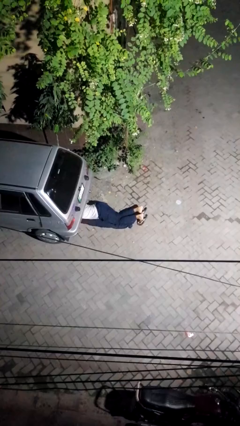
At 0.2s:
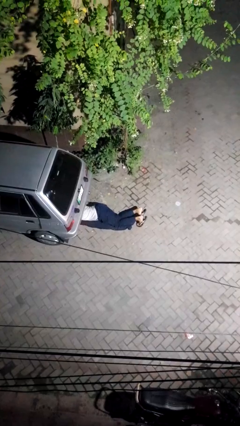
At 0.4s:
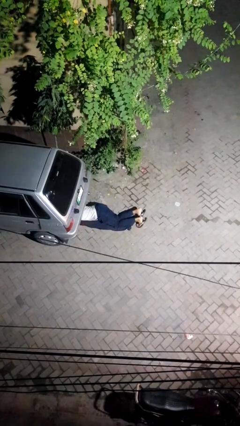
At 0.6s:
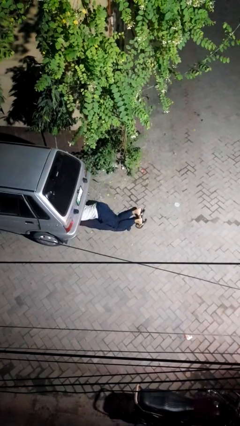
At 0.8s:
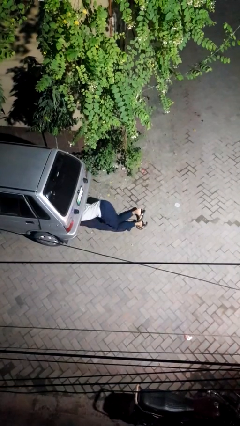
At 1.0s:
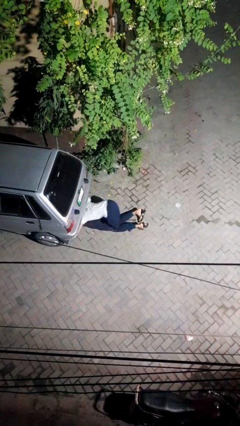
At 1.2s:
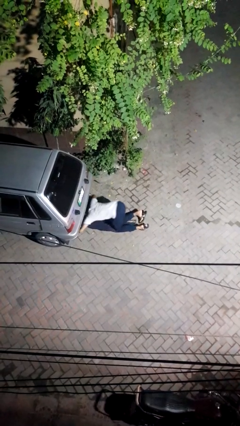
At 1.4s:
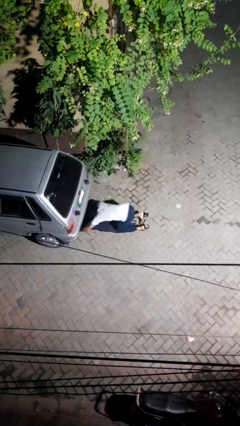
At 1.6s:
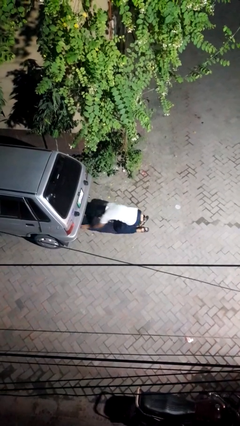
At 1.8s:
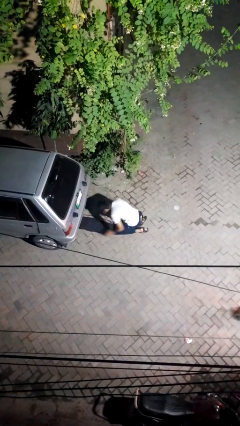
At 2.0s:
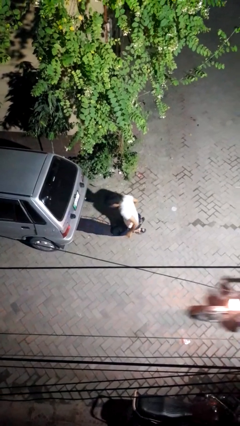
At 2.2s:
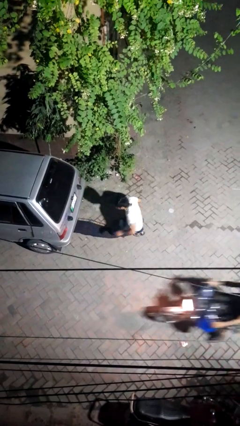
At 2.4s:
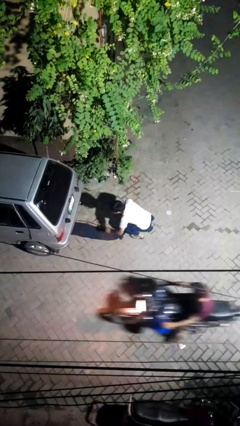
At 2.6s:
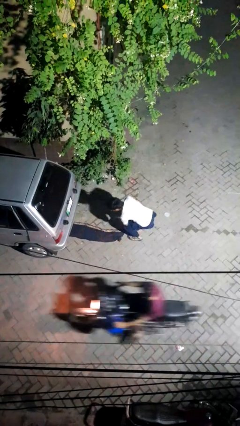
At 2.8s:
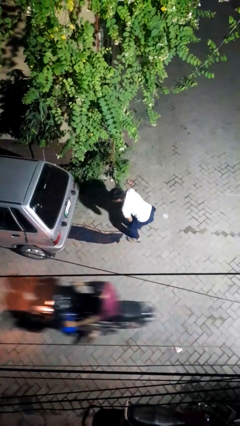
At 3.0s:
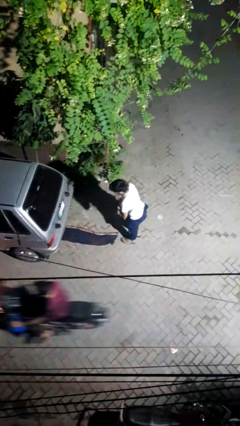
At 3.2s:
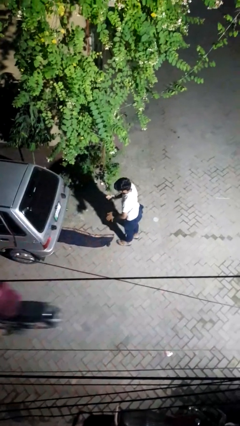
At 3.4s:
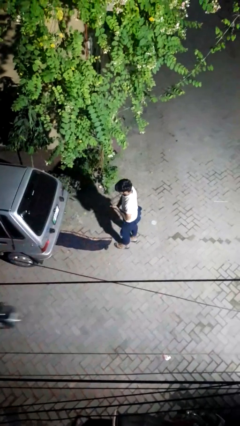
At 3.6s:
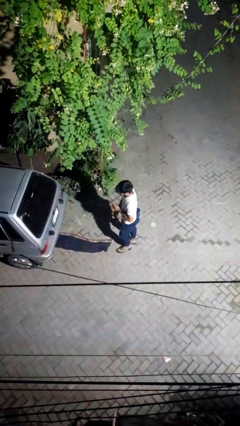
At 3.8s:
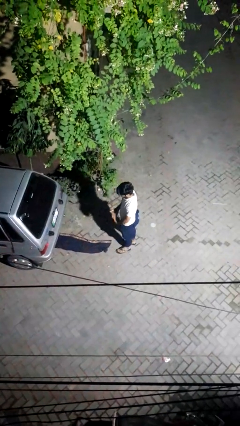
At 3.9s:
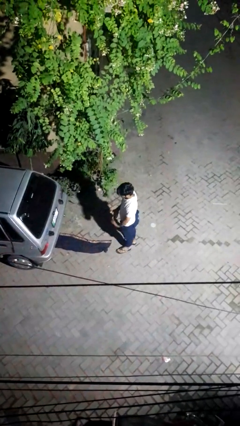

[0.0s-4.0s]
person crawls out from under vehicle

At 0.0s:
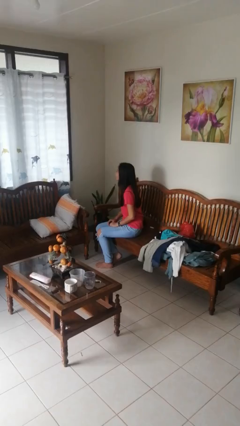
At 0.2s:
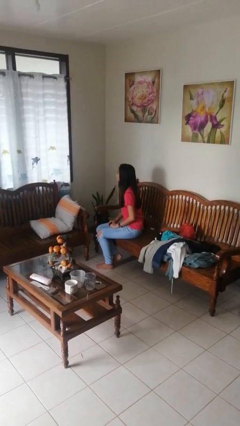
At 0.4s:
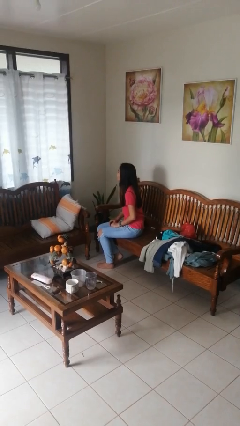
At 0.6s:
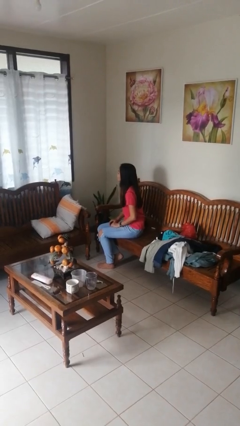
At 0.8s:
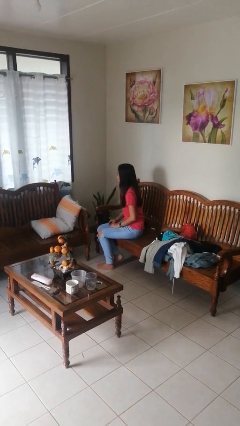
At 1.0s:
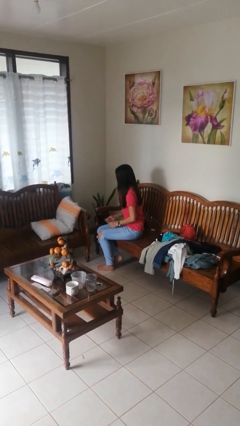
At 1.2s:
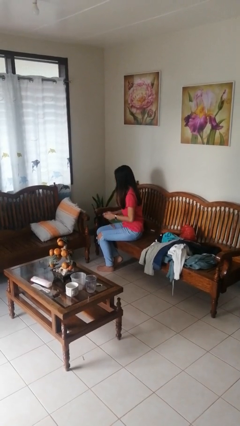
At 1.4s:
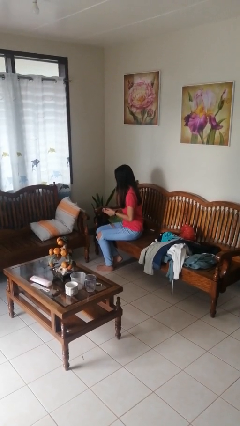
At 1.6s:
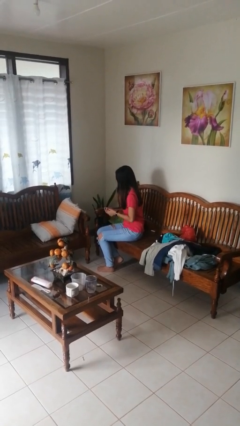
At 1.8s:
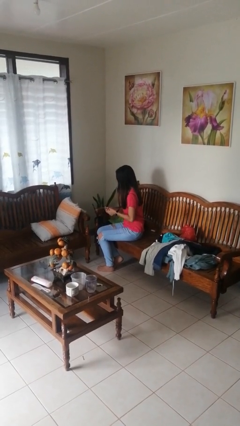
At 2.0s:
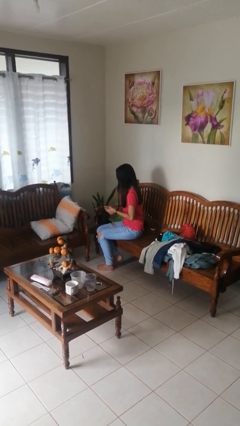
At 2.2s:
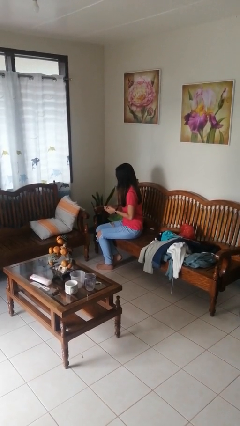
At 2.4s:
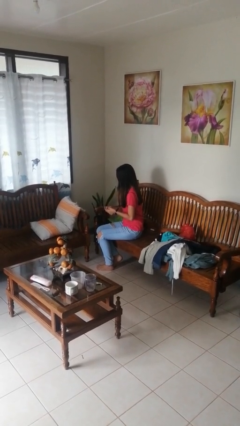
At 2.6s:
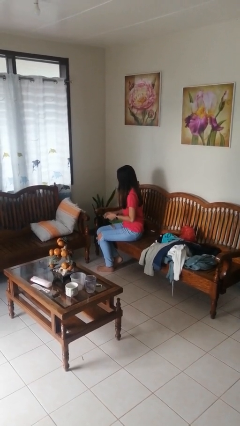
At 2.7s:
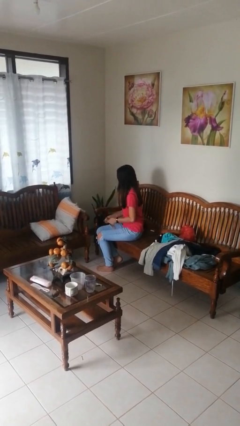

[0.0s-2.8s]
person files fingernails

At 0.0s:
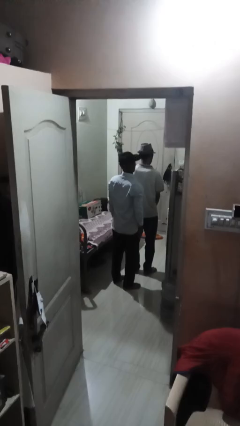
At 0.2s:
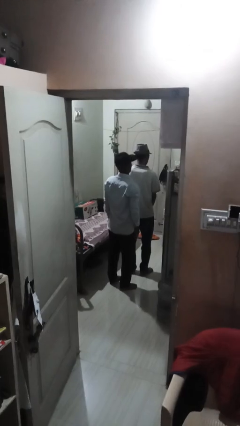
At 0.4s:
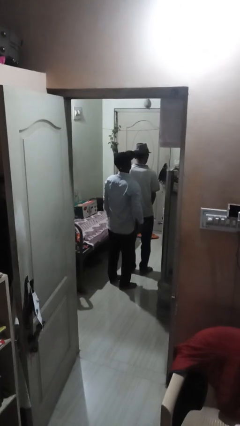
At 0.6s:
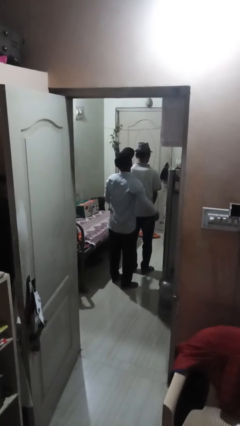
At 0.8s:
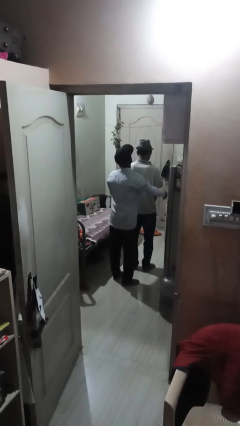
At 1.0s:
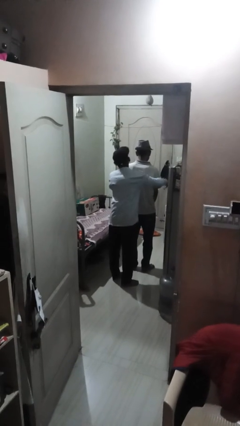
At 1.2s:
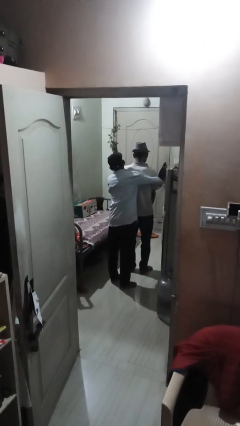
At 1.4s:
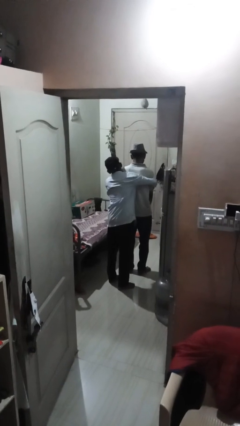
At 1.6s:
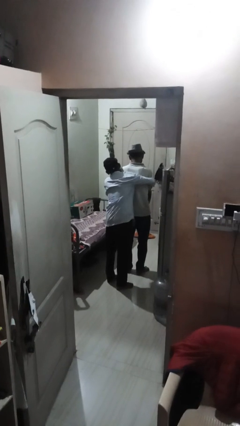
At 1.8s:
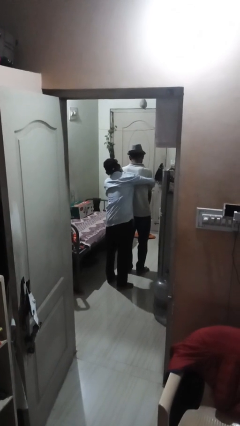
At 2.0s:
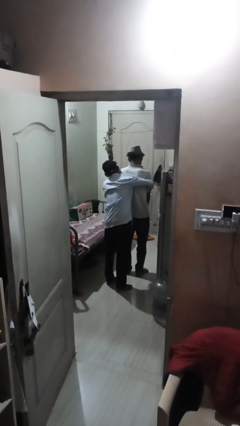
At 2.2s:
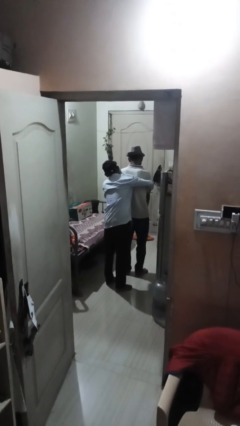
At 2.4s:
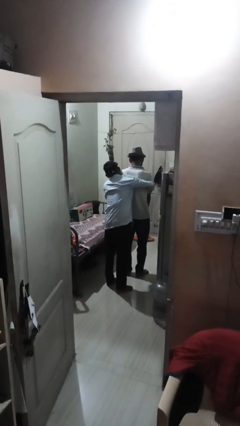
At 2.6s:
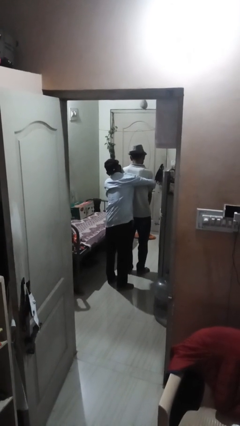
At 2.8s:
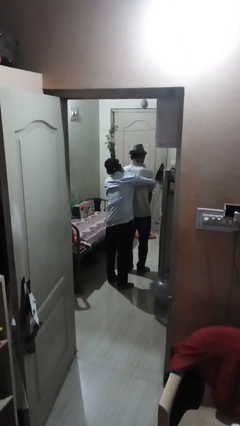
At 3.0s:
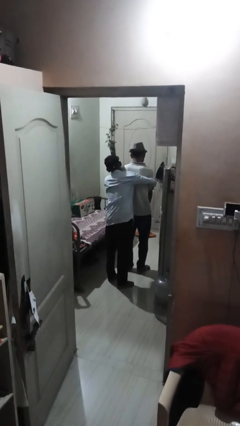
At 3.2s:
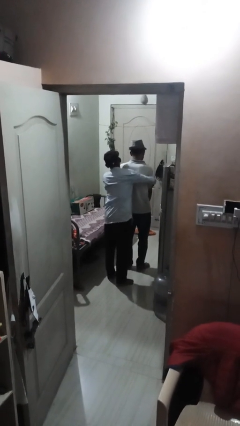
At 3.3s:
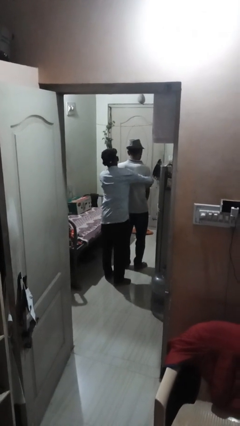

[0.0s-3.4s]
person hugs person from behind

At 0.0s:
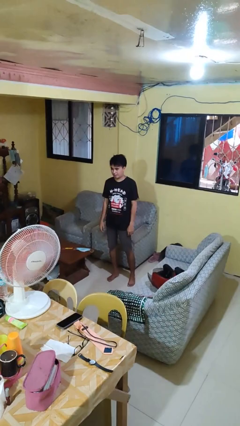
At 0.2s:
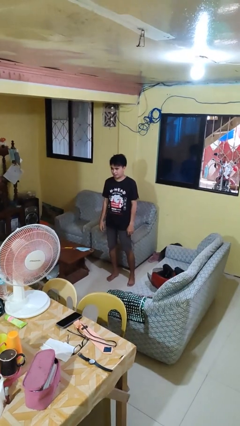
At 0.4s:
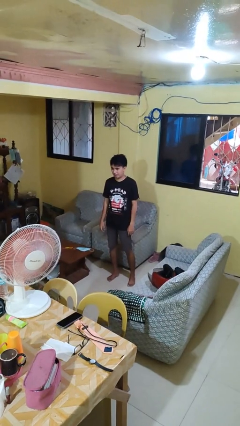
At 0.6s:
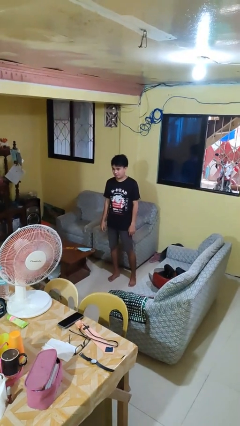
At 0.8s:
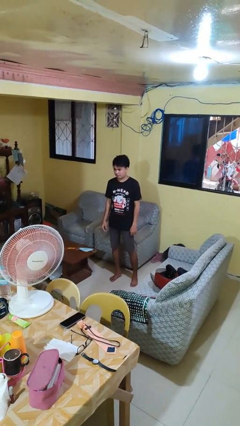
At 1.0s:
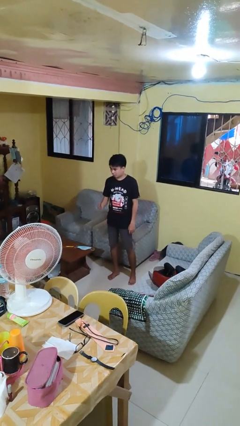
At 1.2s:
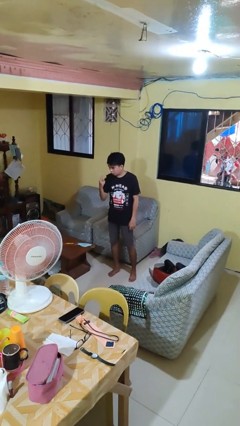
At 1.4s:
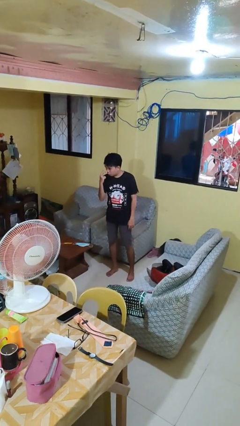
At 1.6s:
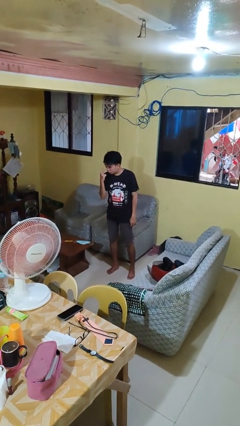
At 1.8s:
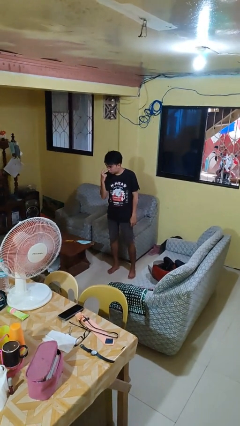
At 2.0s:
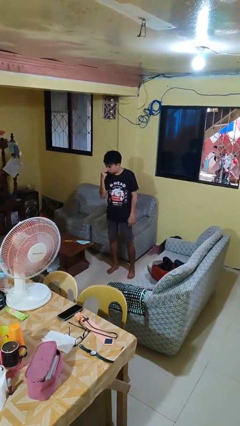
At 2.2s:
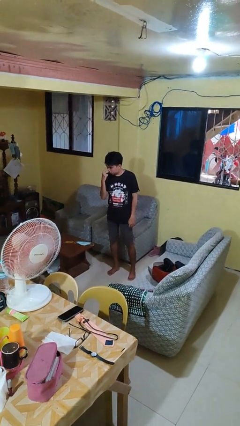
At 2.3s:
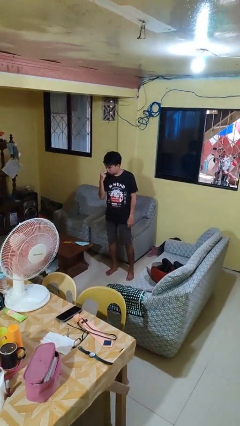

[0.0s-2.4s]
person gestures watch closely

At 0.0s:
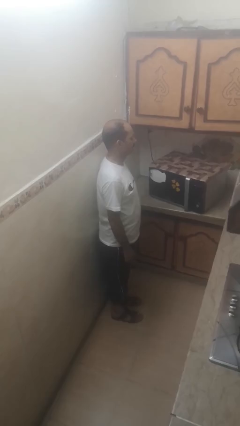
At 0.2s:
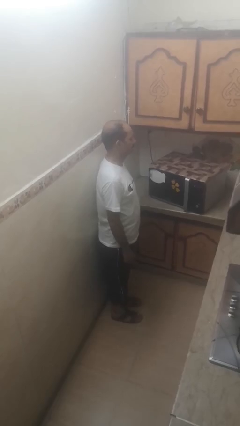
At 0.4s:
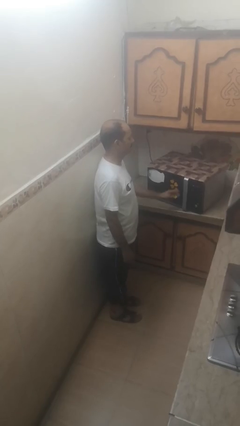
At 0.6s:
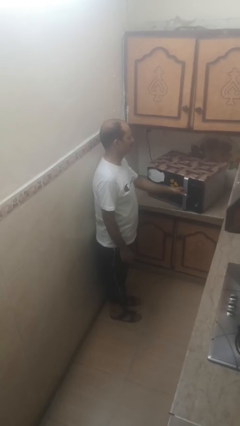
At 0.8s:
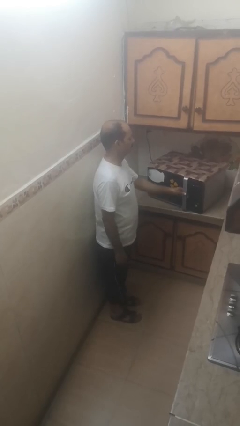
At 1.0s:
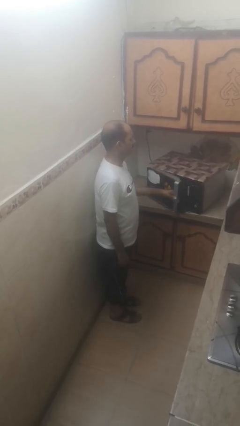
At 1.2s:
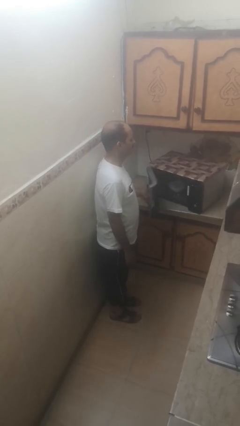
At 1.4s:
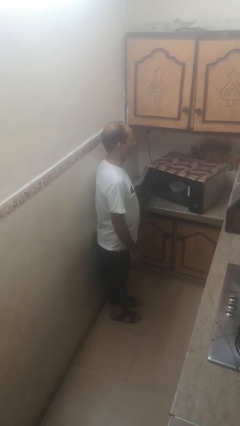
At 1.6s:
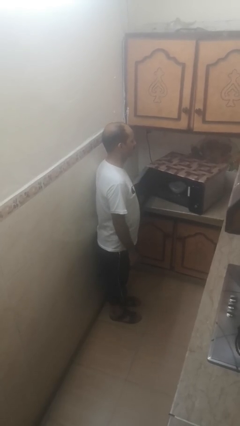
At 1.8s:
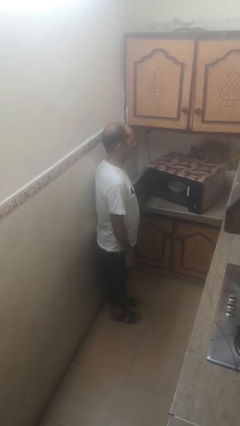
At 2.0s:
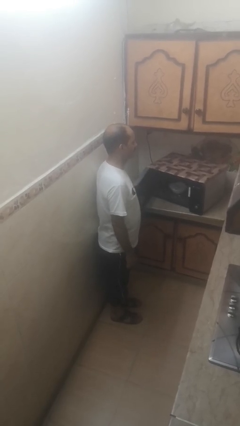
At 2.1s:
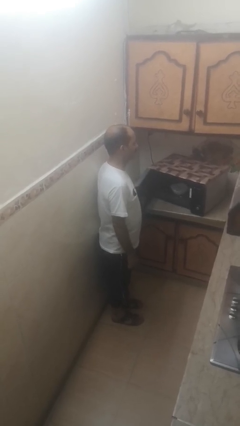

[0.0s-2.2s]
person opens microwave

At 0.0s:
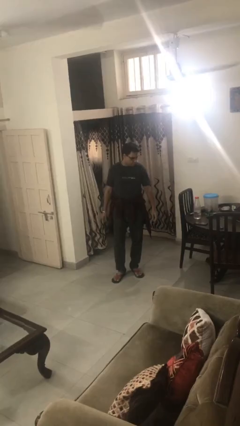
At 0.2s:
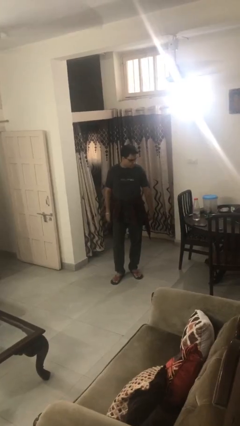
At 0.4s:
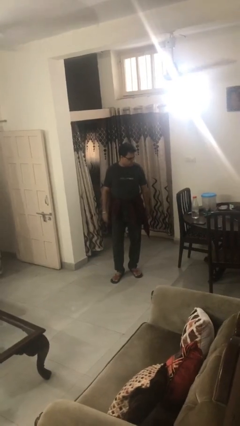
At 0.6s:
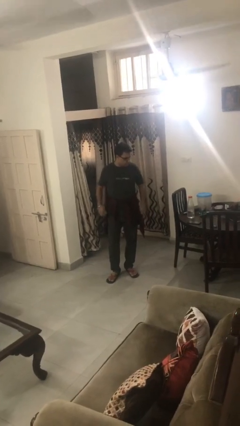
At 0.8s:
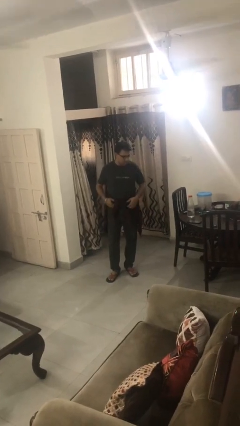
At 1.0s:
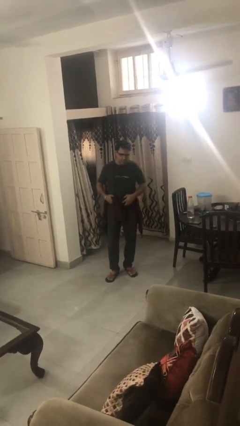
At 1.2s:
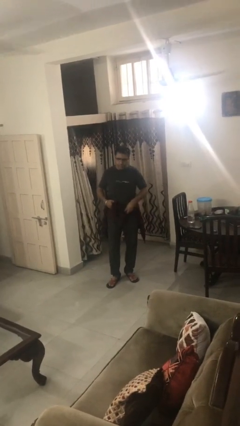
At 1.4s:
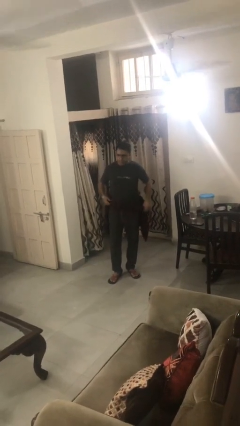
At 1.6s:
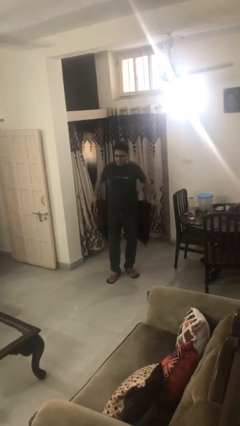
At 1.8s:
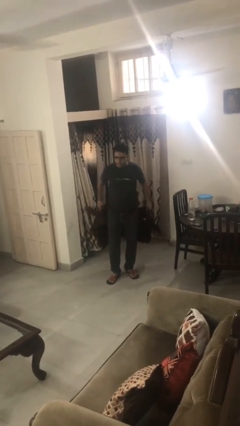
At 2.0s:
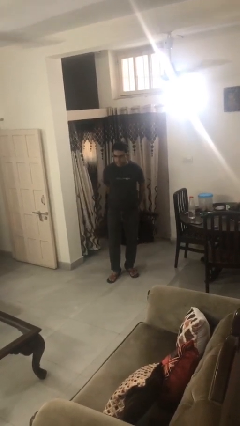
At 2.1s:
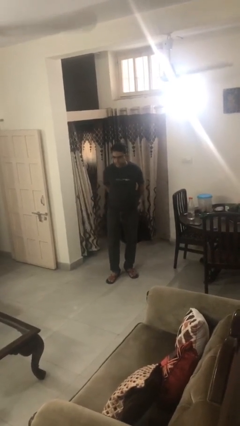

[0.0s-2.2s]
person unties jacket around waist

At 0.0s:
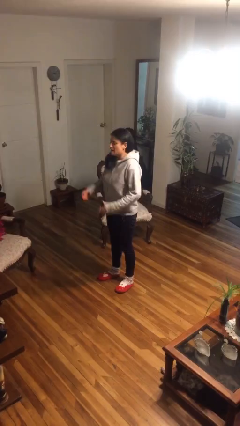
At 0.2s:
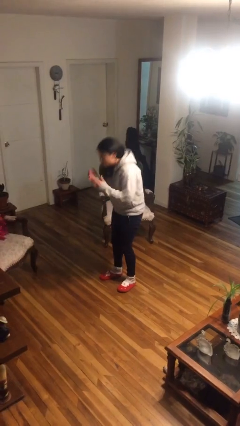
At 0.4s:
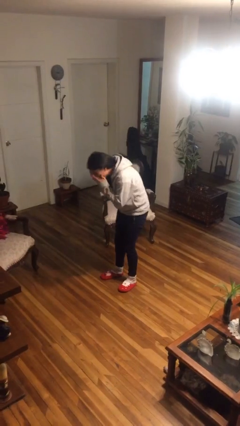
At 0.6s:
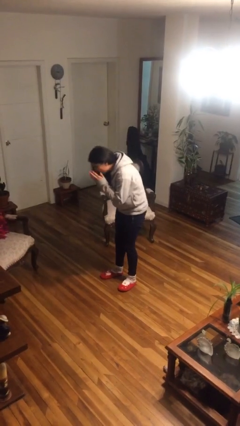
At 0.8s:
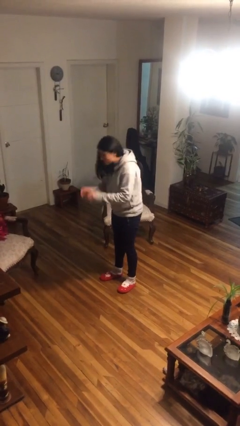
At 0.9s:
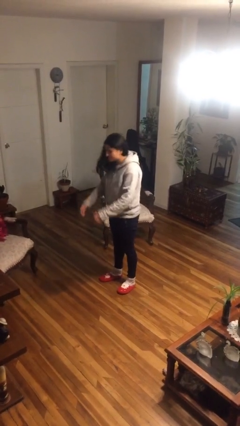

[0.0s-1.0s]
person sneezes into hand
